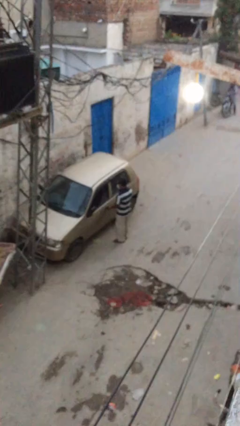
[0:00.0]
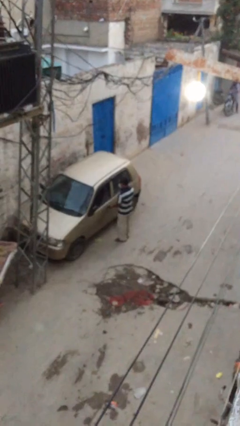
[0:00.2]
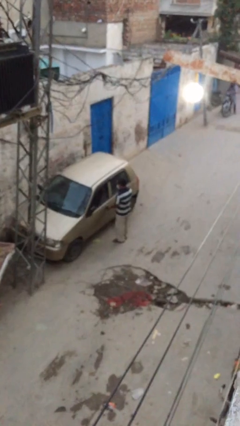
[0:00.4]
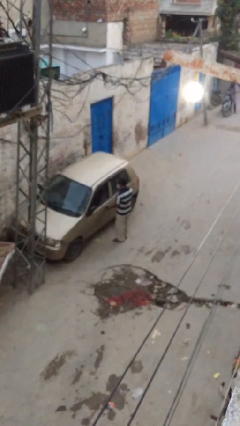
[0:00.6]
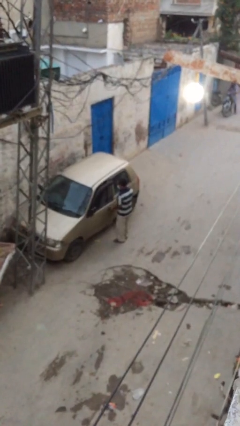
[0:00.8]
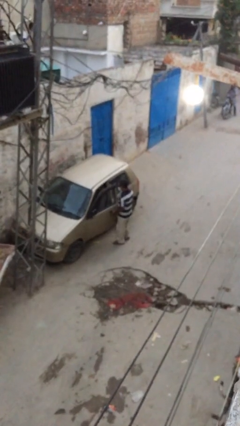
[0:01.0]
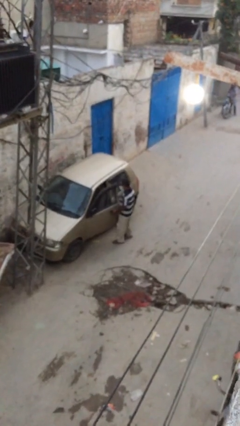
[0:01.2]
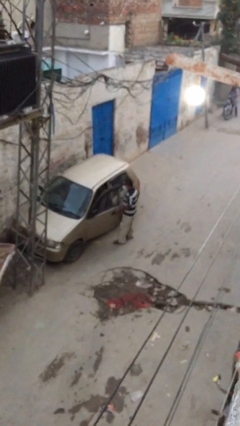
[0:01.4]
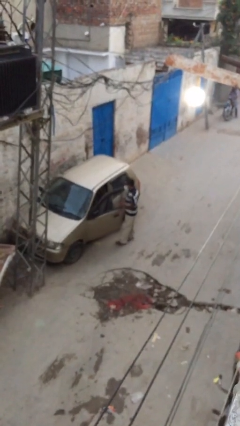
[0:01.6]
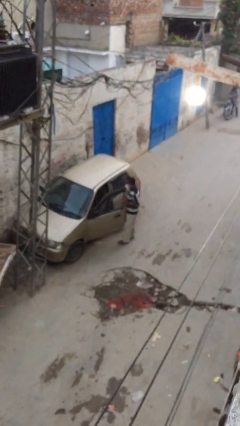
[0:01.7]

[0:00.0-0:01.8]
person opens car door

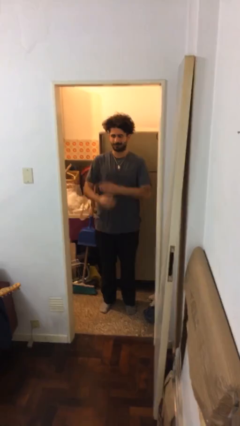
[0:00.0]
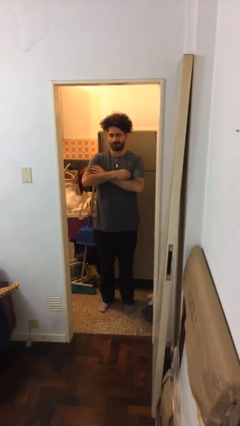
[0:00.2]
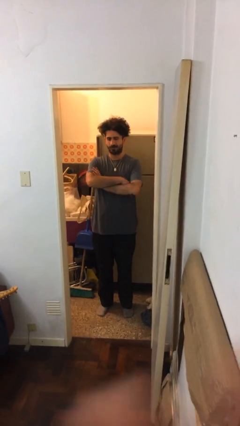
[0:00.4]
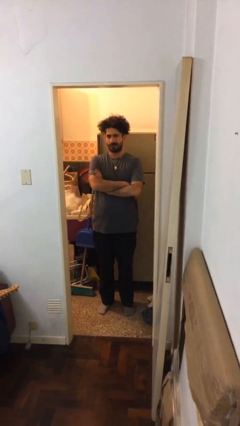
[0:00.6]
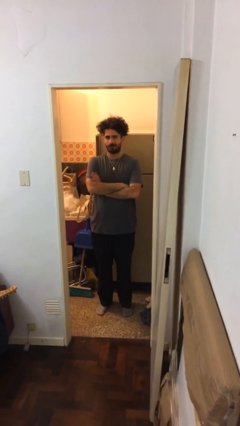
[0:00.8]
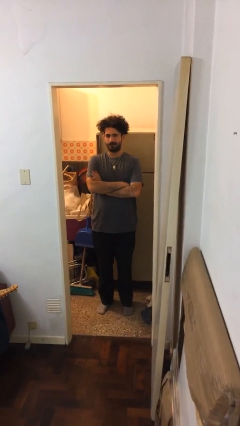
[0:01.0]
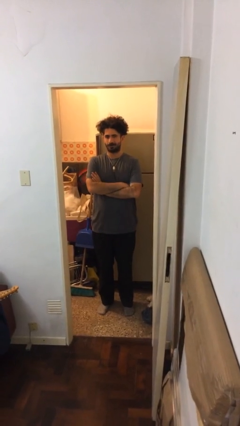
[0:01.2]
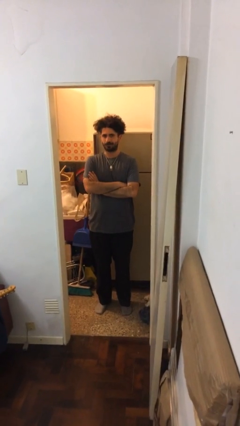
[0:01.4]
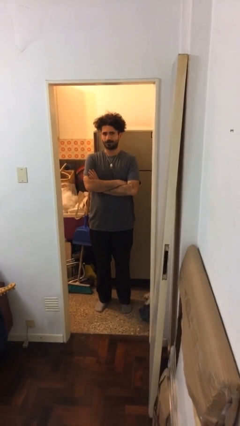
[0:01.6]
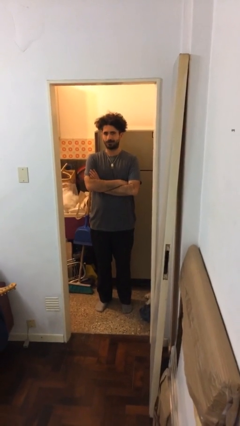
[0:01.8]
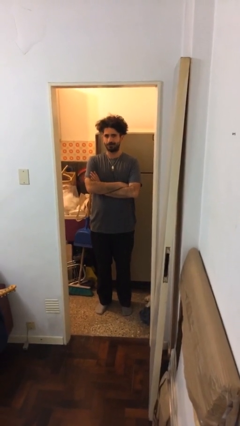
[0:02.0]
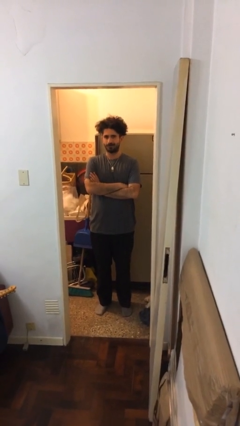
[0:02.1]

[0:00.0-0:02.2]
person crosses arms

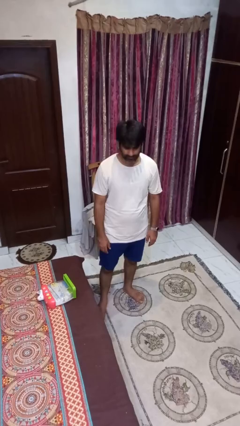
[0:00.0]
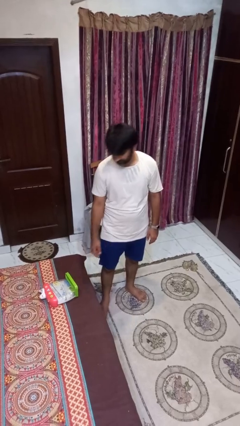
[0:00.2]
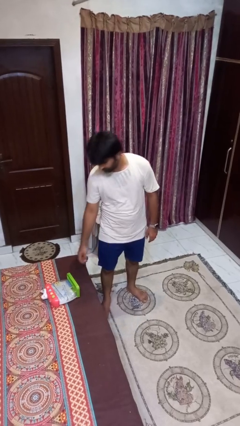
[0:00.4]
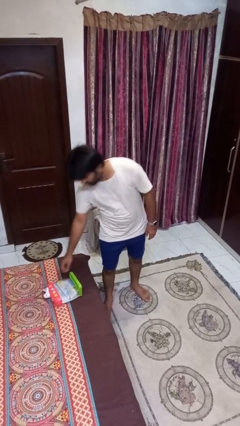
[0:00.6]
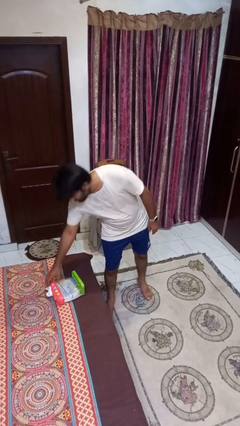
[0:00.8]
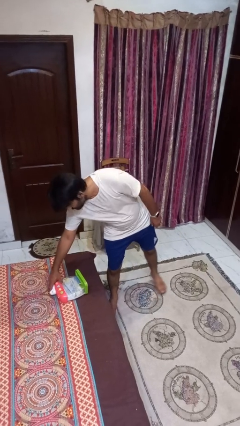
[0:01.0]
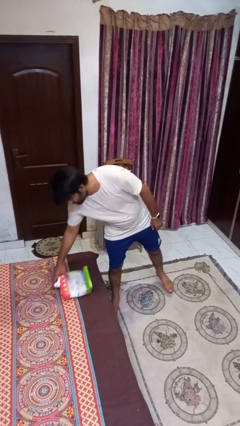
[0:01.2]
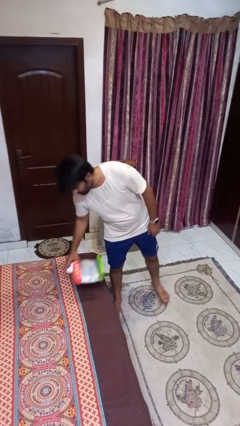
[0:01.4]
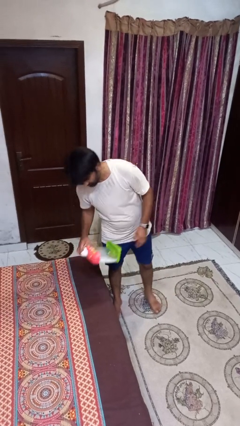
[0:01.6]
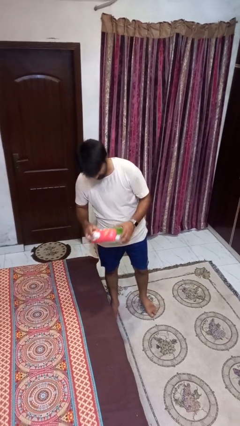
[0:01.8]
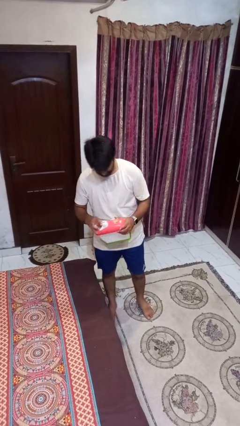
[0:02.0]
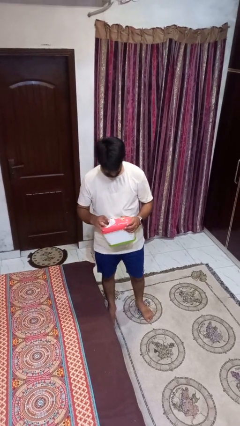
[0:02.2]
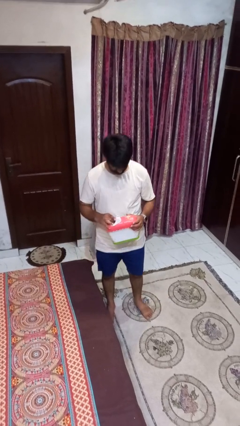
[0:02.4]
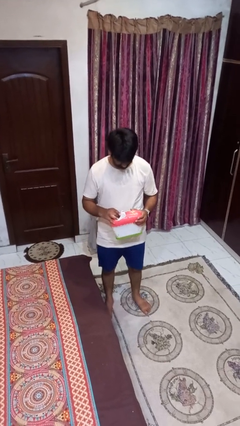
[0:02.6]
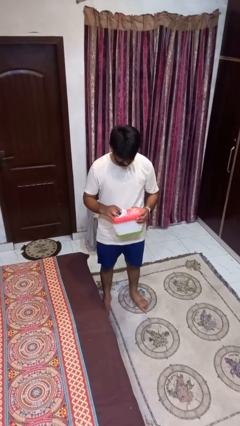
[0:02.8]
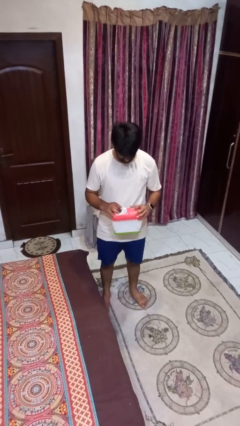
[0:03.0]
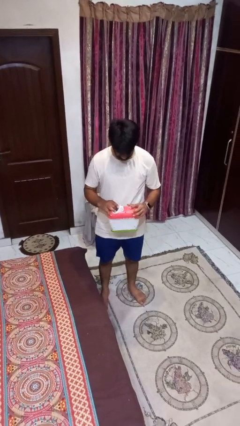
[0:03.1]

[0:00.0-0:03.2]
person picks up object from bed

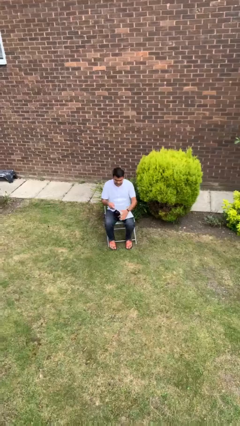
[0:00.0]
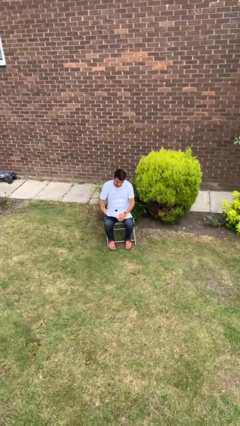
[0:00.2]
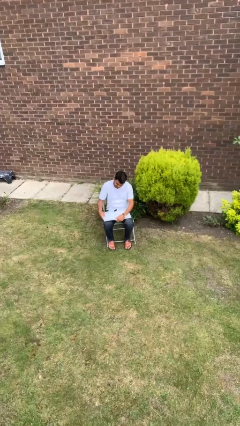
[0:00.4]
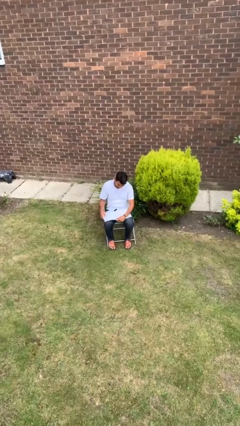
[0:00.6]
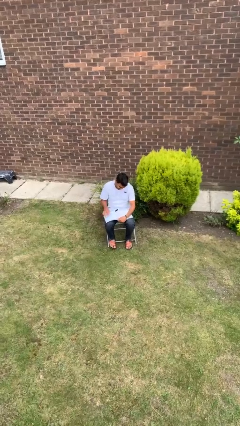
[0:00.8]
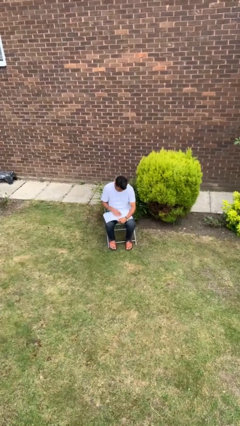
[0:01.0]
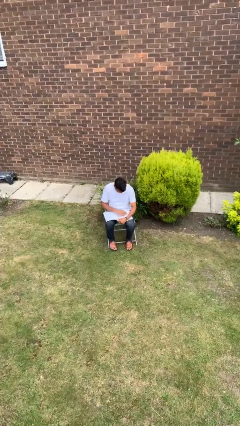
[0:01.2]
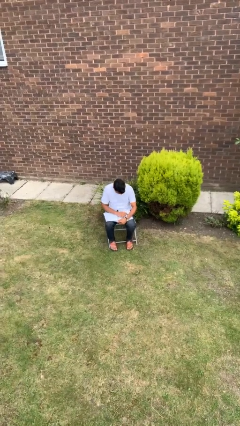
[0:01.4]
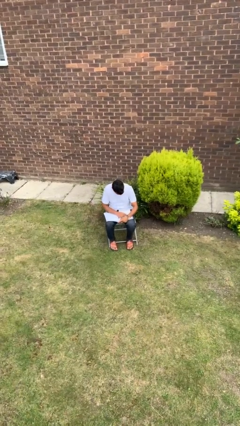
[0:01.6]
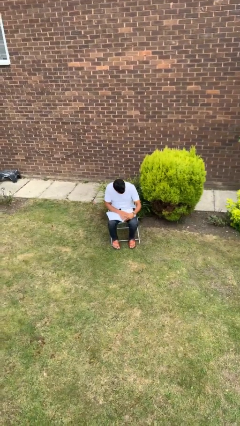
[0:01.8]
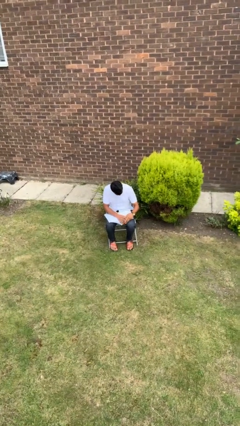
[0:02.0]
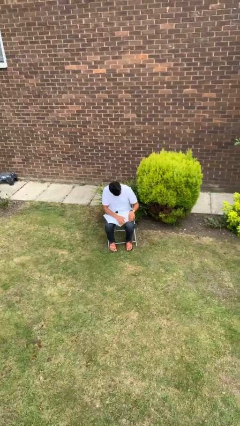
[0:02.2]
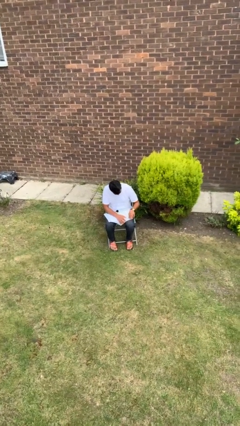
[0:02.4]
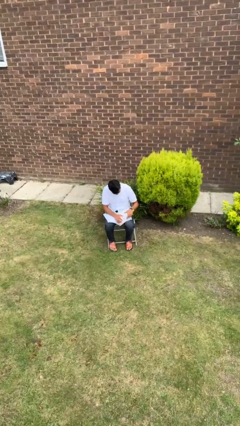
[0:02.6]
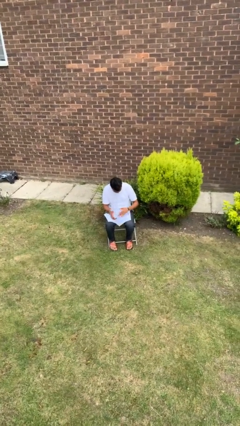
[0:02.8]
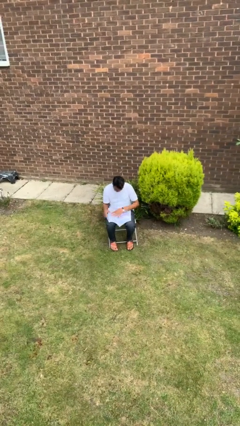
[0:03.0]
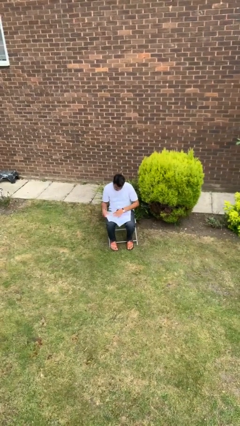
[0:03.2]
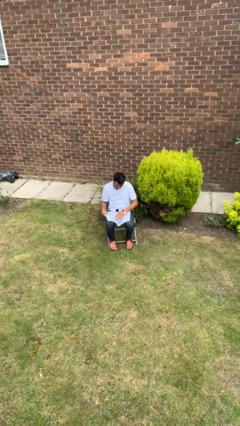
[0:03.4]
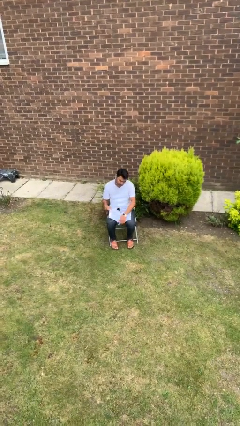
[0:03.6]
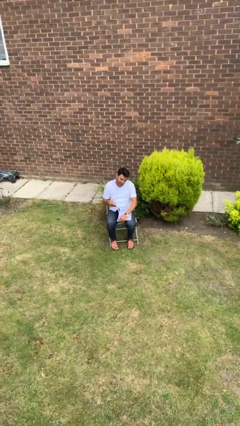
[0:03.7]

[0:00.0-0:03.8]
person reads book

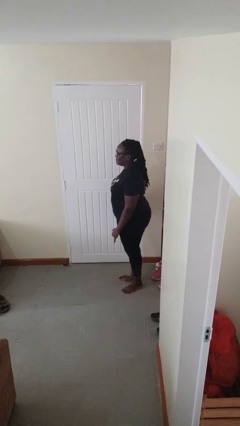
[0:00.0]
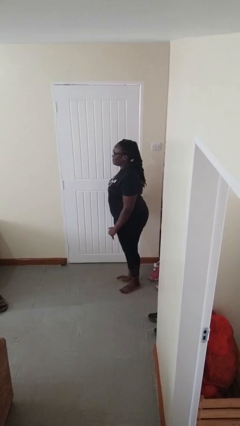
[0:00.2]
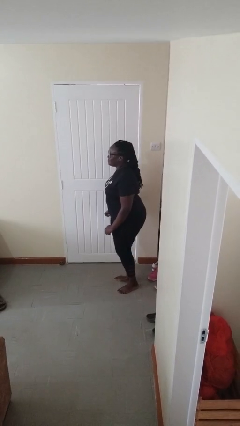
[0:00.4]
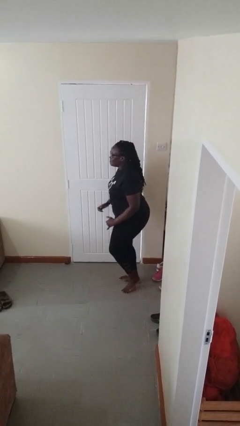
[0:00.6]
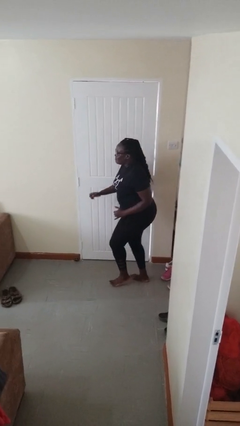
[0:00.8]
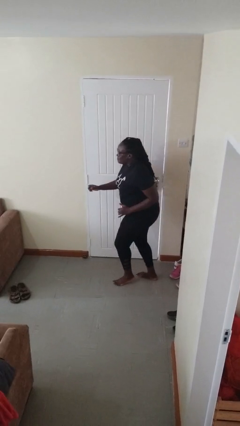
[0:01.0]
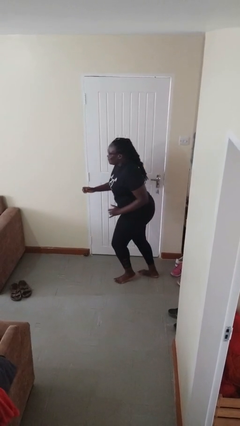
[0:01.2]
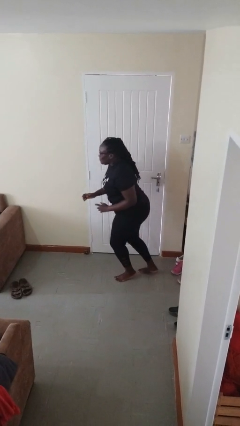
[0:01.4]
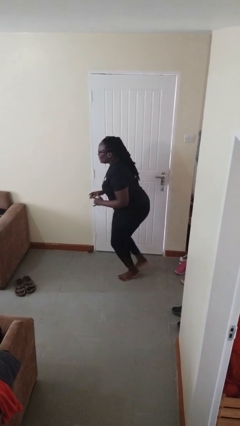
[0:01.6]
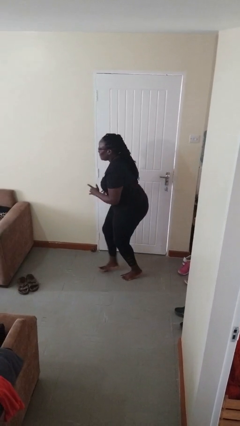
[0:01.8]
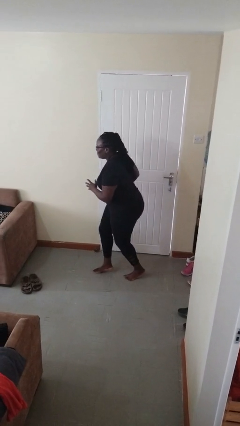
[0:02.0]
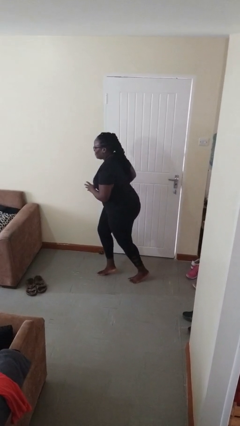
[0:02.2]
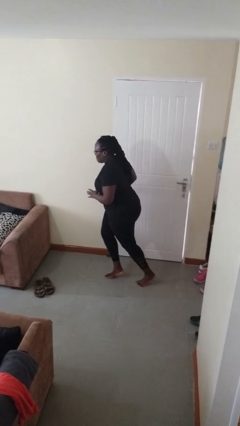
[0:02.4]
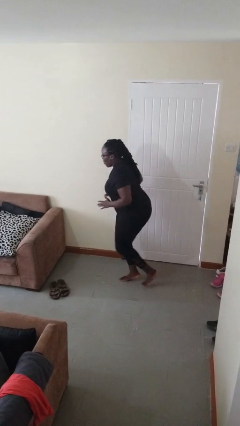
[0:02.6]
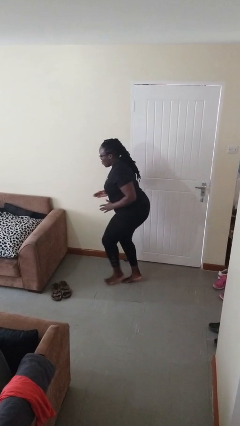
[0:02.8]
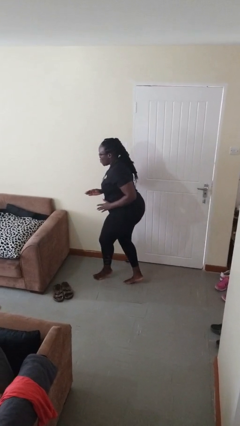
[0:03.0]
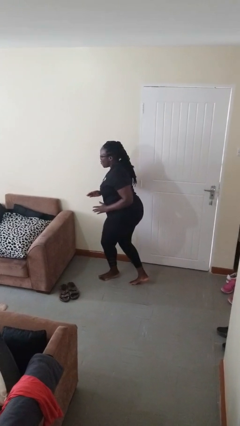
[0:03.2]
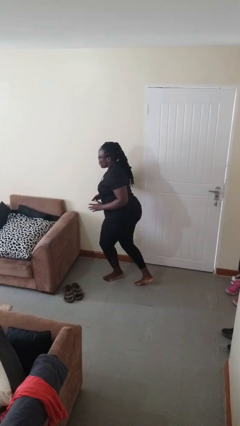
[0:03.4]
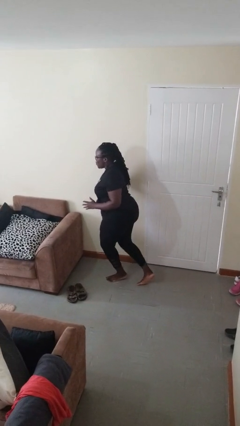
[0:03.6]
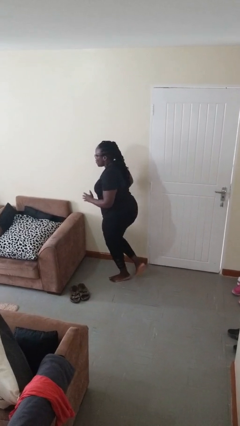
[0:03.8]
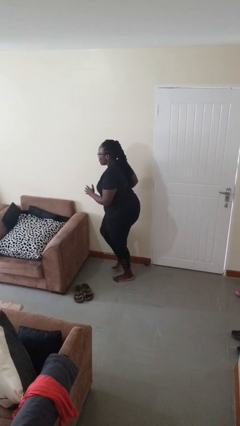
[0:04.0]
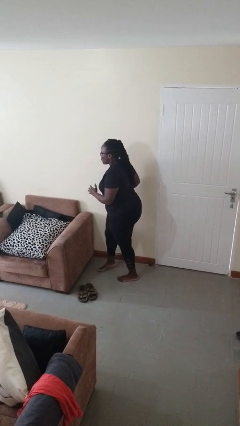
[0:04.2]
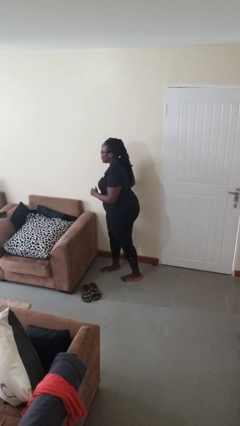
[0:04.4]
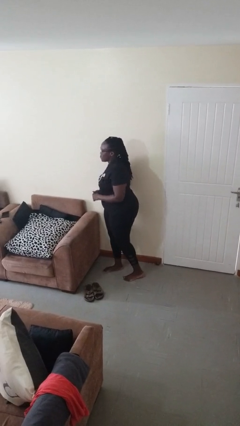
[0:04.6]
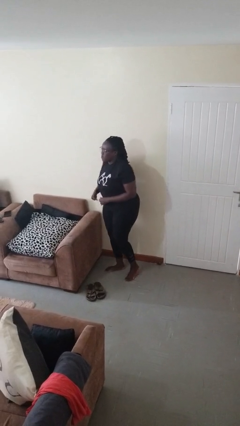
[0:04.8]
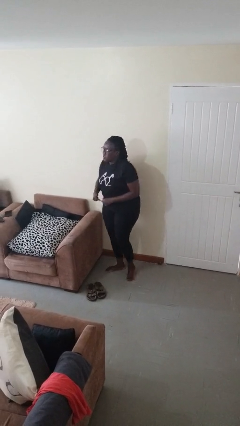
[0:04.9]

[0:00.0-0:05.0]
person walks tiptoe

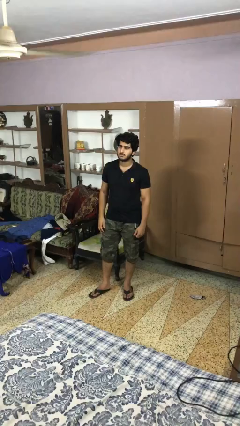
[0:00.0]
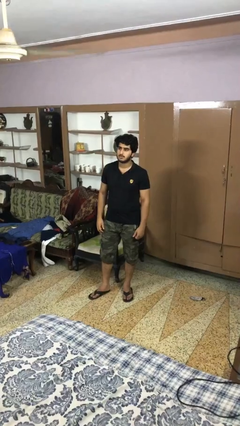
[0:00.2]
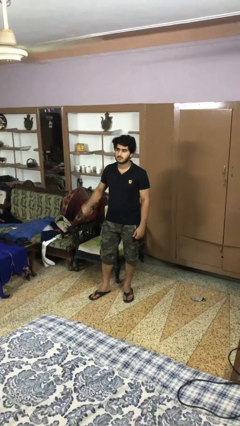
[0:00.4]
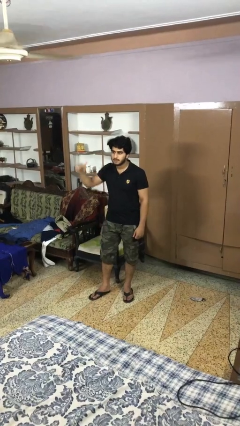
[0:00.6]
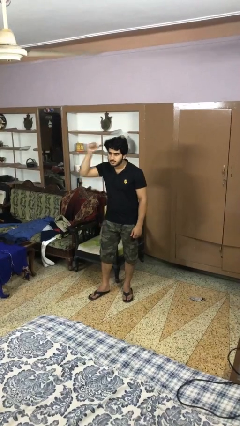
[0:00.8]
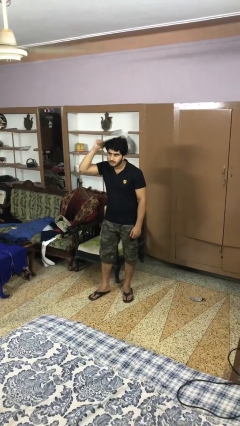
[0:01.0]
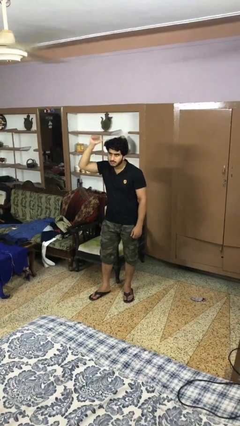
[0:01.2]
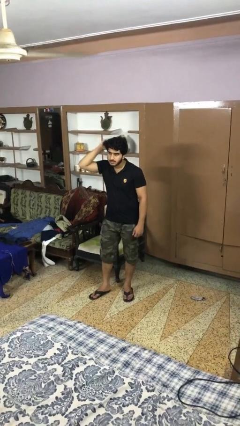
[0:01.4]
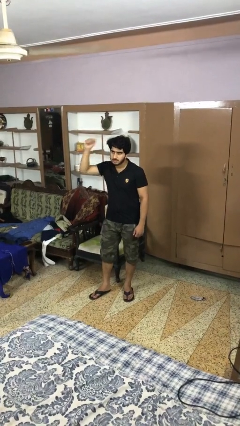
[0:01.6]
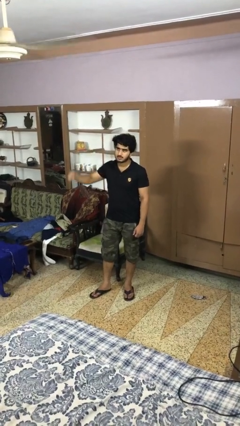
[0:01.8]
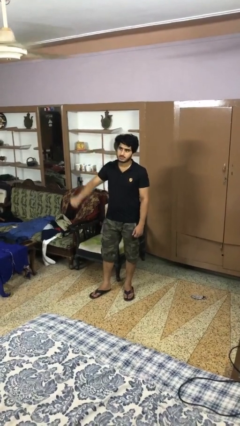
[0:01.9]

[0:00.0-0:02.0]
person gestures behind me
